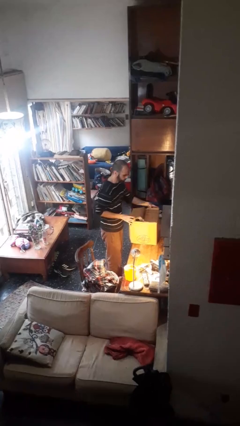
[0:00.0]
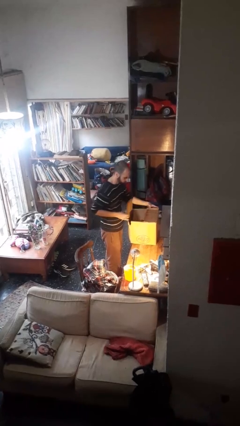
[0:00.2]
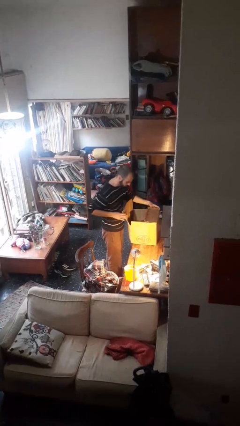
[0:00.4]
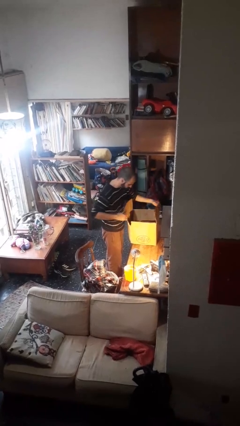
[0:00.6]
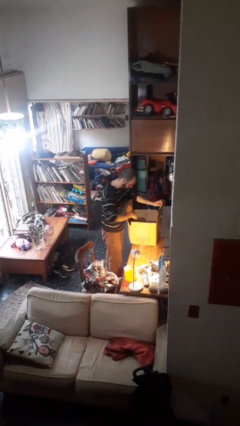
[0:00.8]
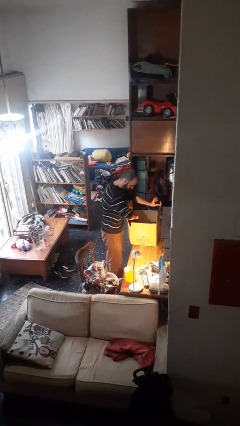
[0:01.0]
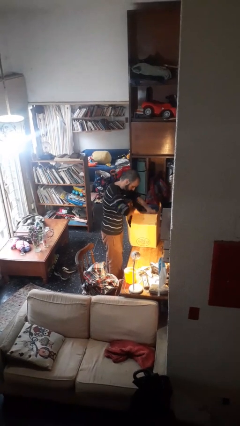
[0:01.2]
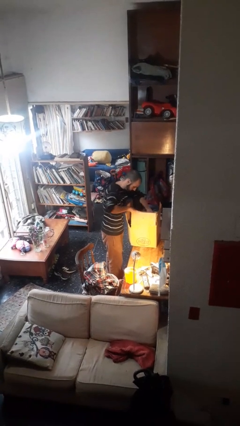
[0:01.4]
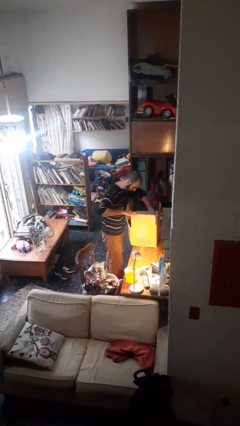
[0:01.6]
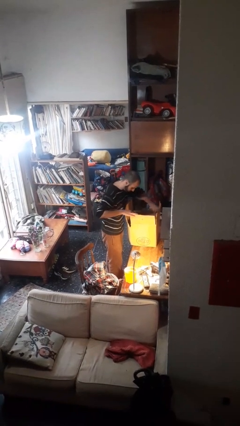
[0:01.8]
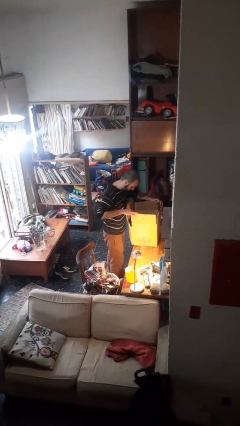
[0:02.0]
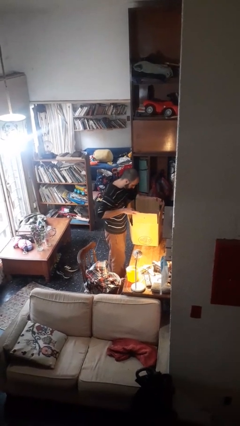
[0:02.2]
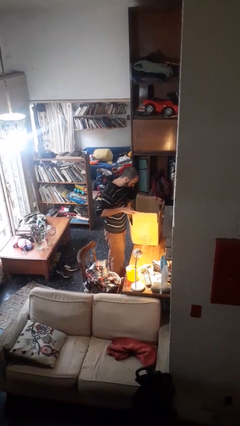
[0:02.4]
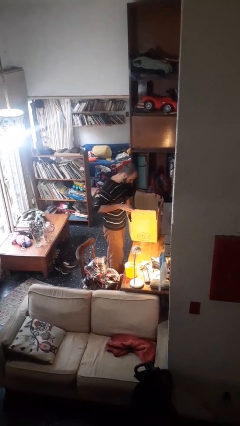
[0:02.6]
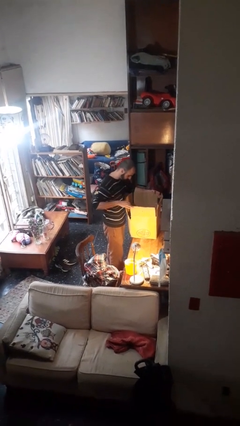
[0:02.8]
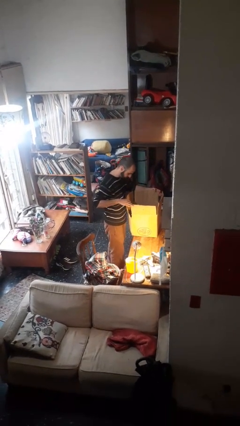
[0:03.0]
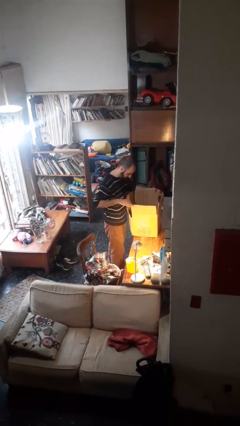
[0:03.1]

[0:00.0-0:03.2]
person opens box

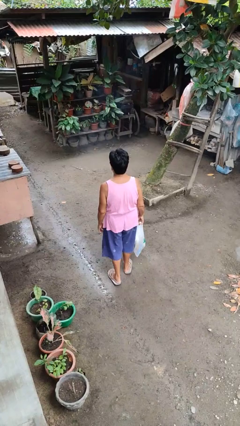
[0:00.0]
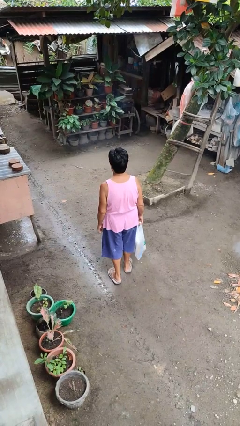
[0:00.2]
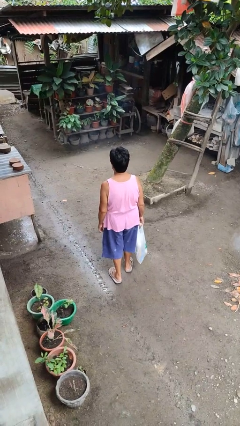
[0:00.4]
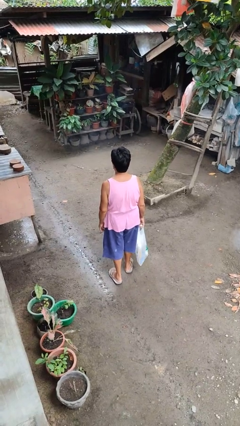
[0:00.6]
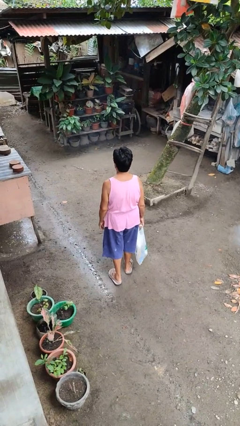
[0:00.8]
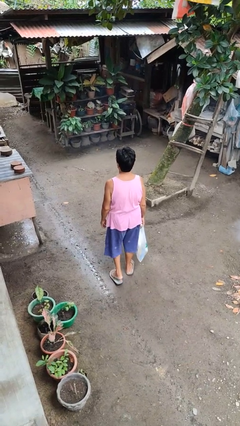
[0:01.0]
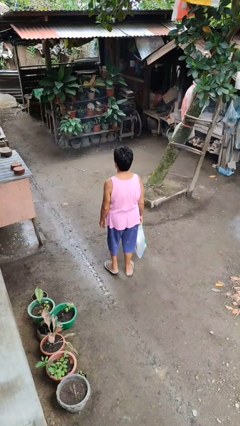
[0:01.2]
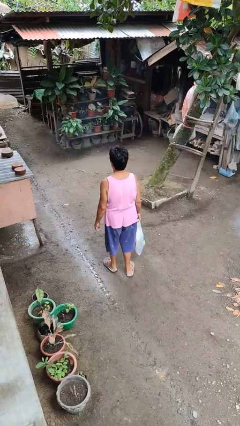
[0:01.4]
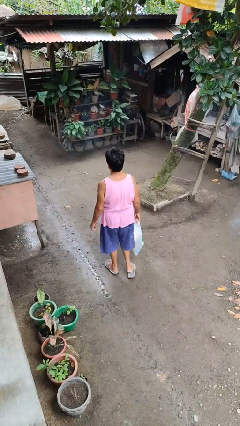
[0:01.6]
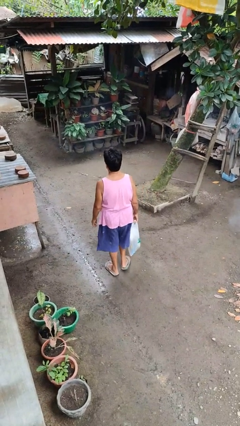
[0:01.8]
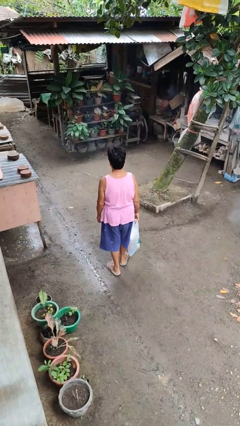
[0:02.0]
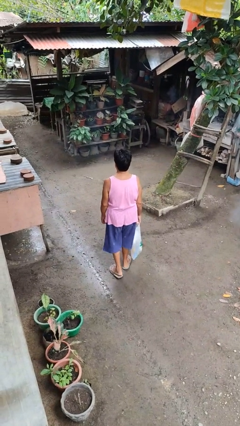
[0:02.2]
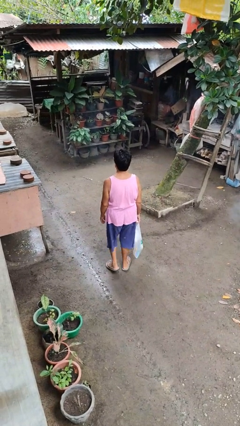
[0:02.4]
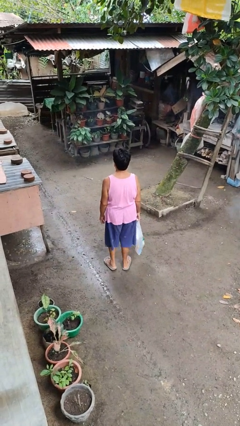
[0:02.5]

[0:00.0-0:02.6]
person carries groceries

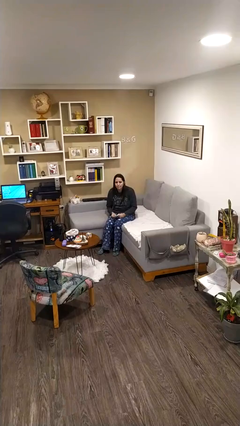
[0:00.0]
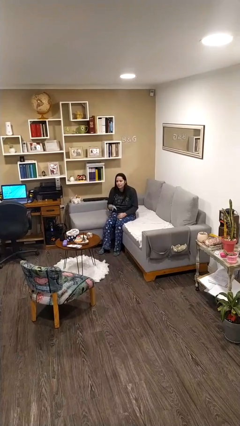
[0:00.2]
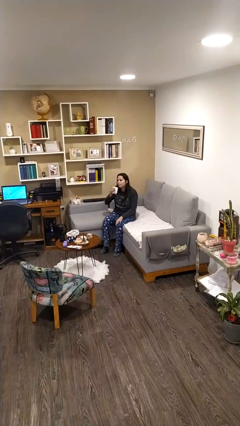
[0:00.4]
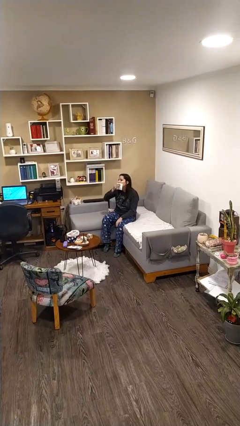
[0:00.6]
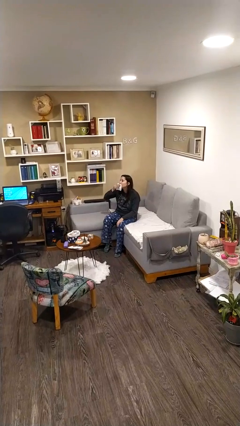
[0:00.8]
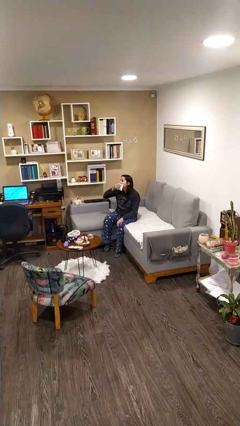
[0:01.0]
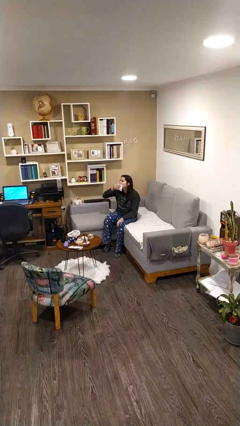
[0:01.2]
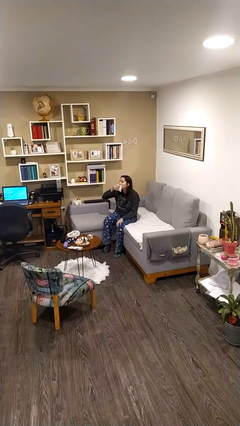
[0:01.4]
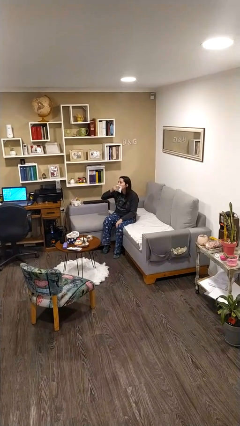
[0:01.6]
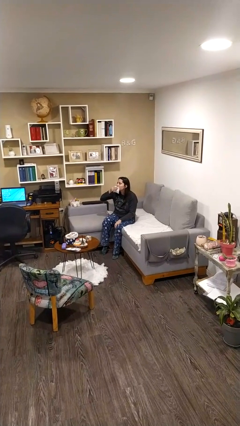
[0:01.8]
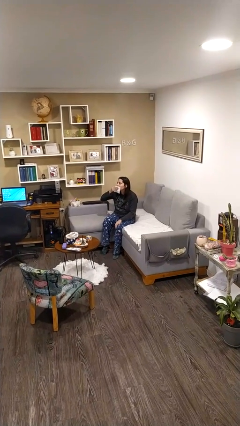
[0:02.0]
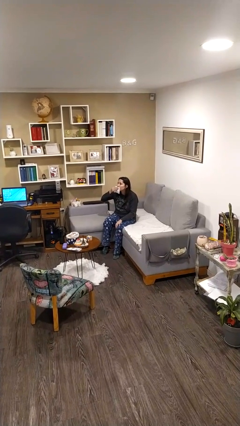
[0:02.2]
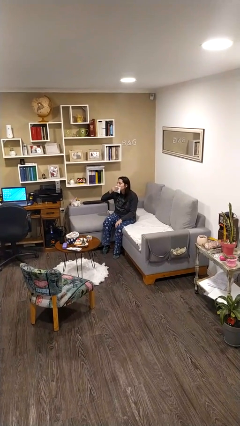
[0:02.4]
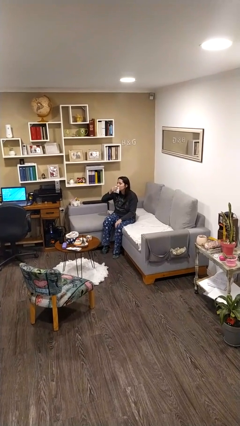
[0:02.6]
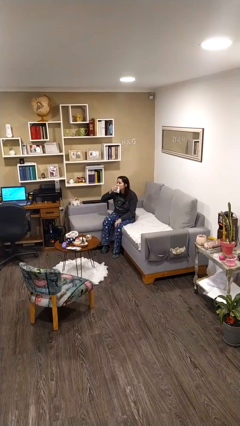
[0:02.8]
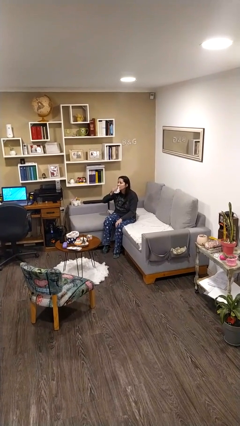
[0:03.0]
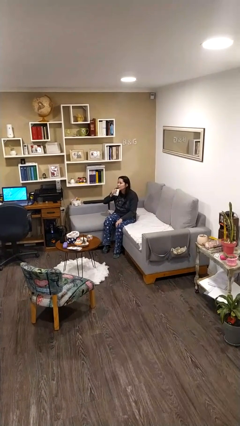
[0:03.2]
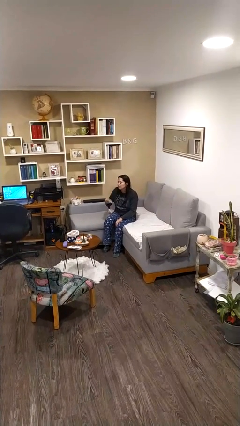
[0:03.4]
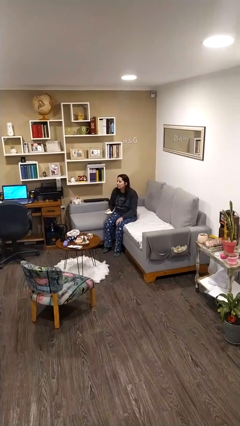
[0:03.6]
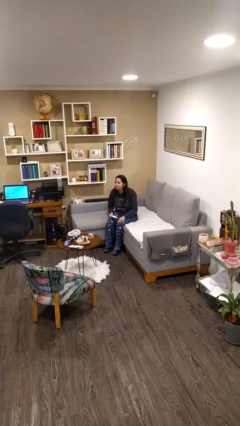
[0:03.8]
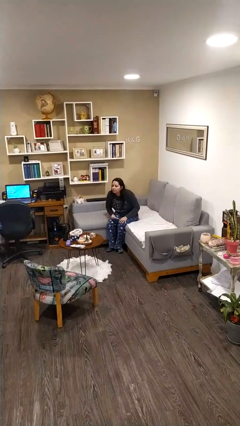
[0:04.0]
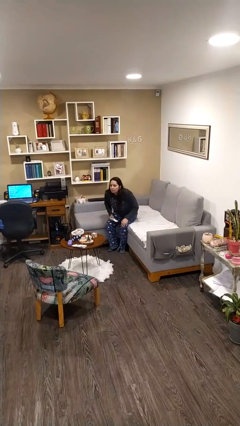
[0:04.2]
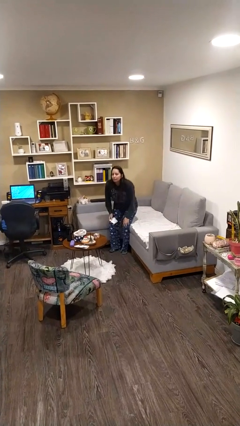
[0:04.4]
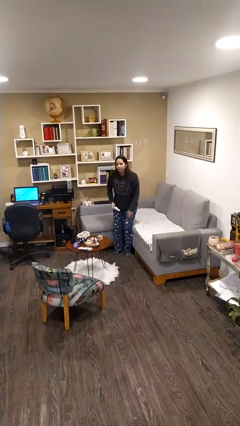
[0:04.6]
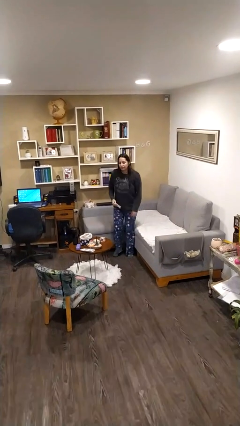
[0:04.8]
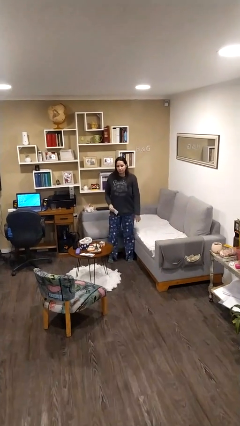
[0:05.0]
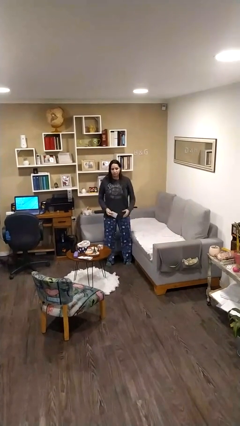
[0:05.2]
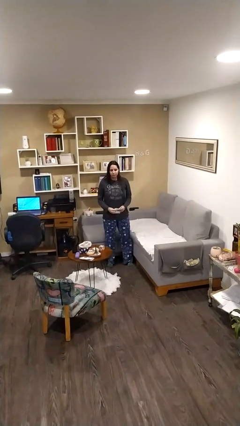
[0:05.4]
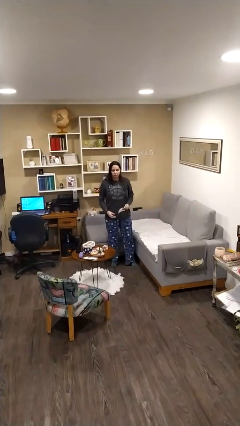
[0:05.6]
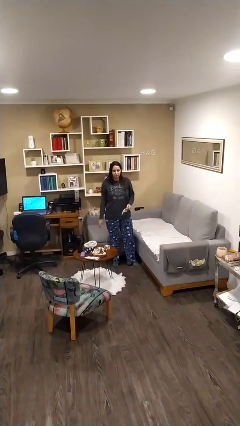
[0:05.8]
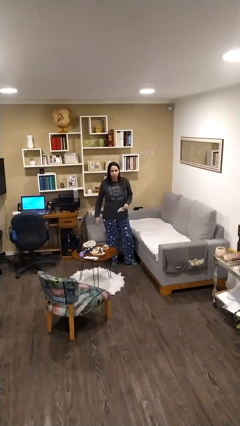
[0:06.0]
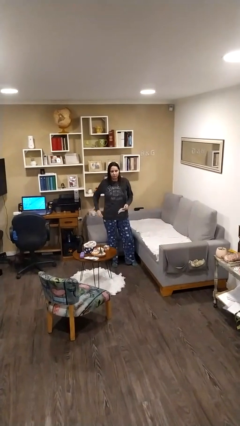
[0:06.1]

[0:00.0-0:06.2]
person wipes mouth with napkin

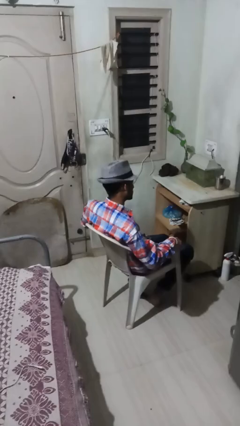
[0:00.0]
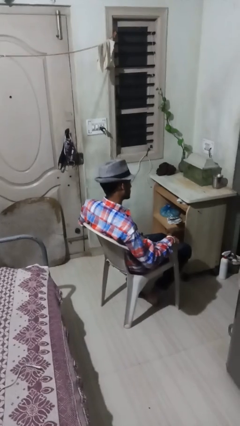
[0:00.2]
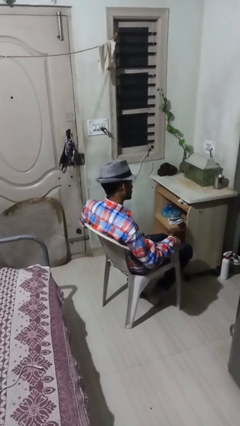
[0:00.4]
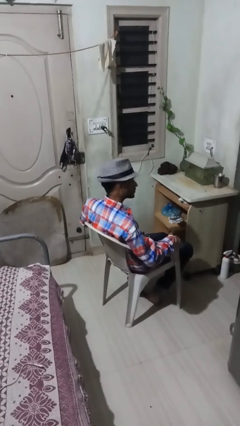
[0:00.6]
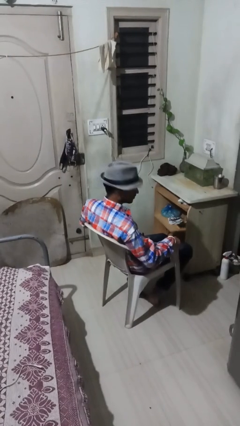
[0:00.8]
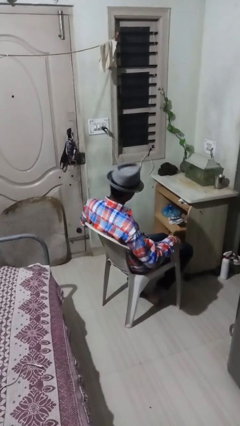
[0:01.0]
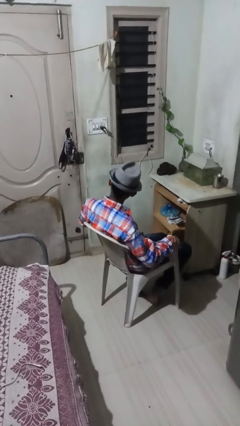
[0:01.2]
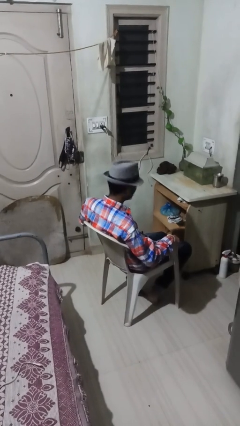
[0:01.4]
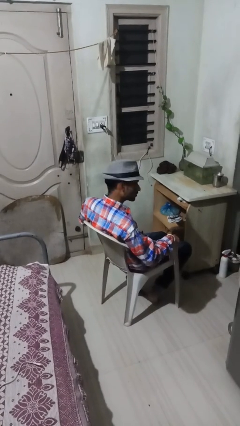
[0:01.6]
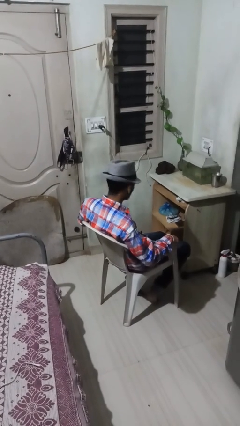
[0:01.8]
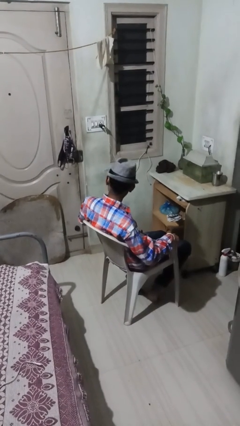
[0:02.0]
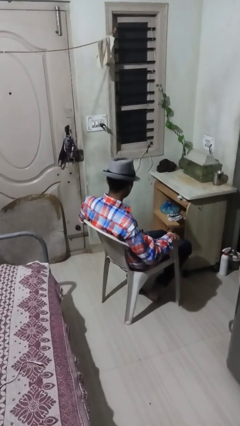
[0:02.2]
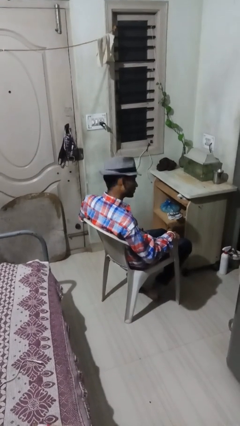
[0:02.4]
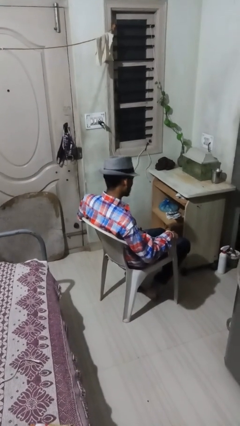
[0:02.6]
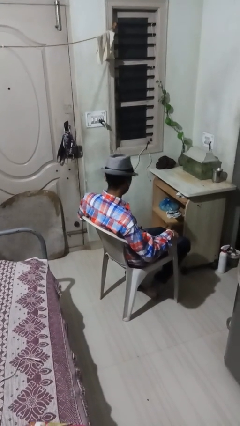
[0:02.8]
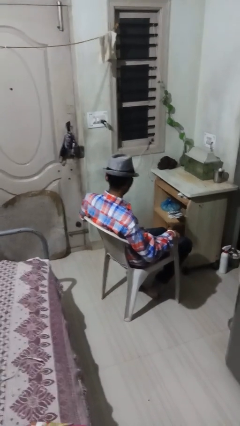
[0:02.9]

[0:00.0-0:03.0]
person shakes head

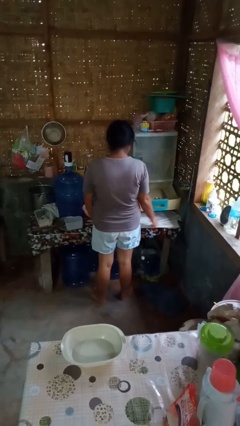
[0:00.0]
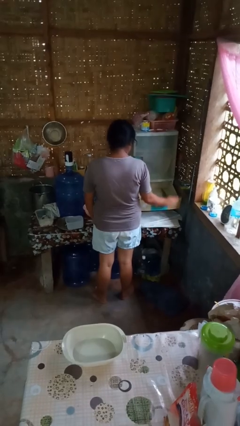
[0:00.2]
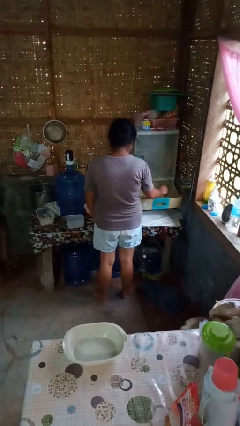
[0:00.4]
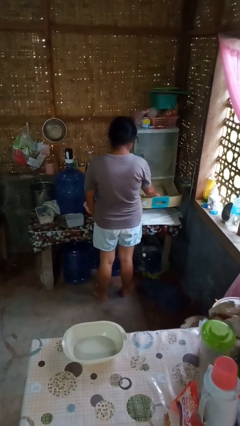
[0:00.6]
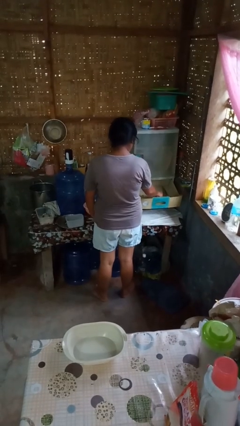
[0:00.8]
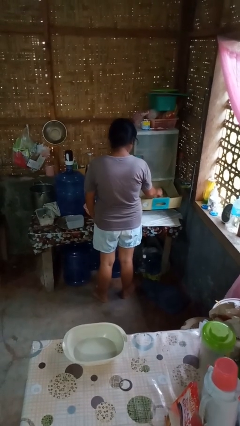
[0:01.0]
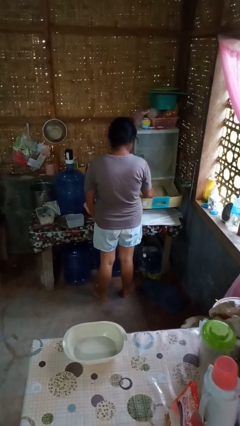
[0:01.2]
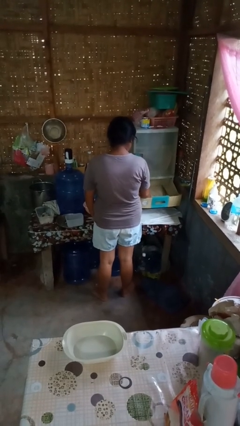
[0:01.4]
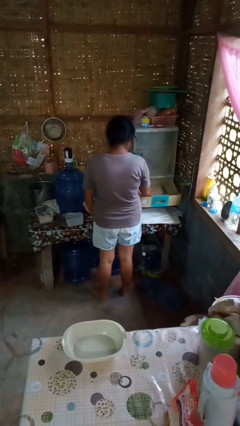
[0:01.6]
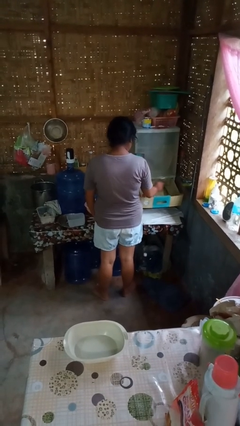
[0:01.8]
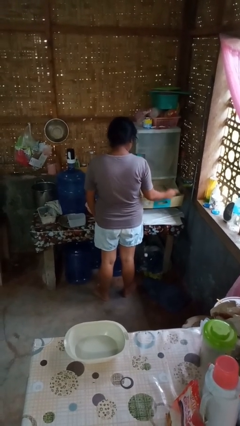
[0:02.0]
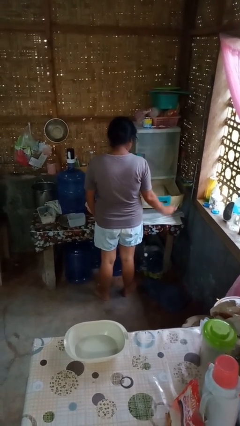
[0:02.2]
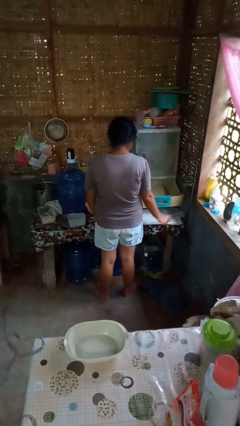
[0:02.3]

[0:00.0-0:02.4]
person takes object from kitchen drawer

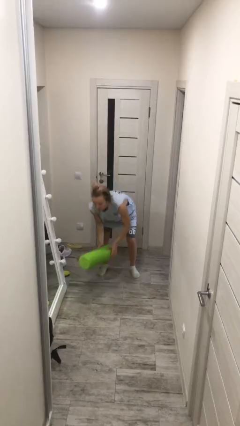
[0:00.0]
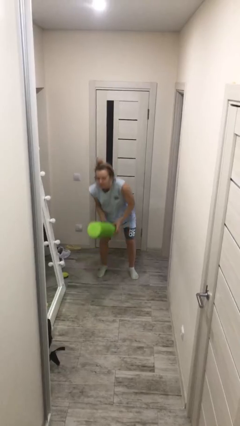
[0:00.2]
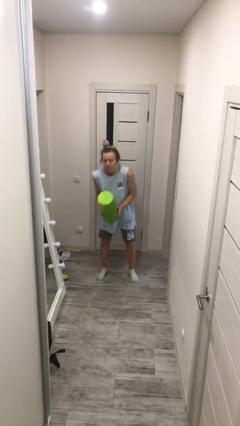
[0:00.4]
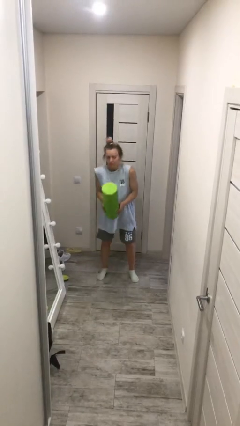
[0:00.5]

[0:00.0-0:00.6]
person picks up object from floor
